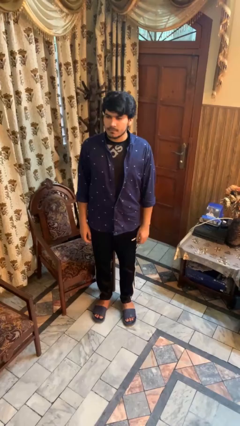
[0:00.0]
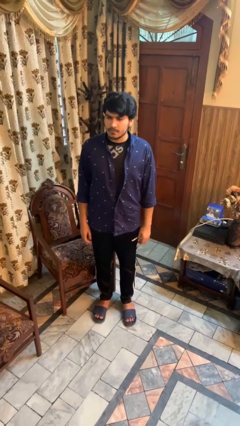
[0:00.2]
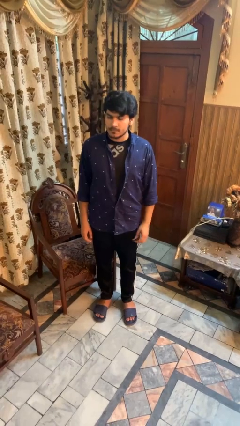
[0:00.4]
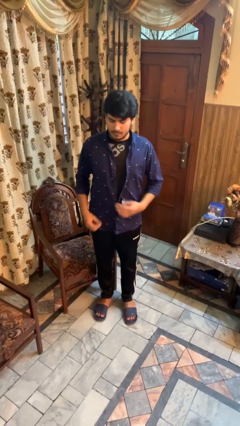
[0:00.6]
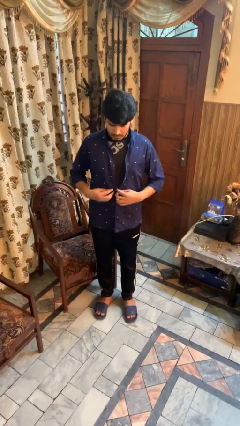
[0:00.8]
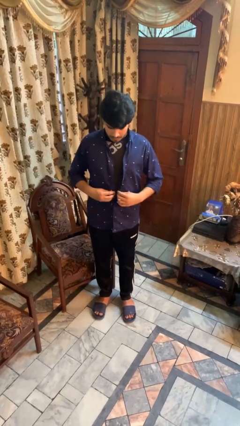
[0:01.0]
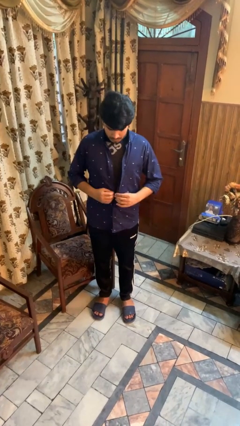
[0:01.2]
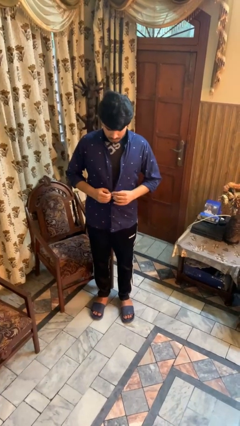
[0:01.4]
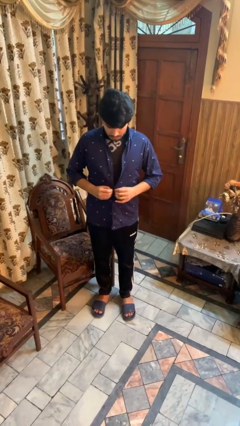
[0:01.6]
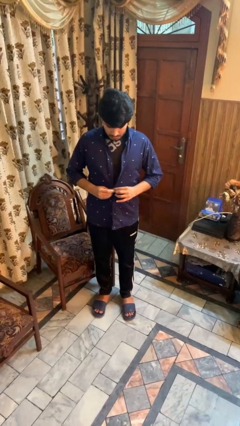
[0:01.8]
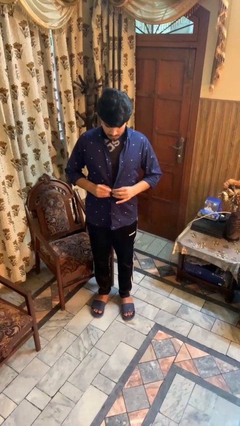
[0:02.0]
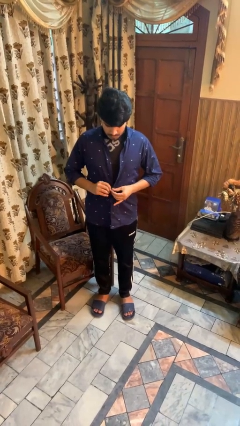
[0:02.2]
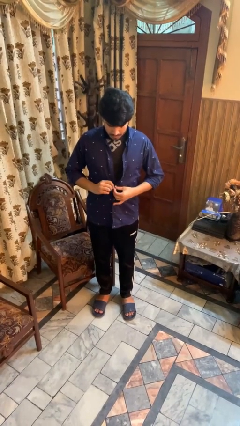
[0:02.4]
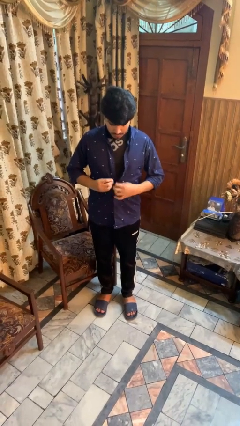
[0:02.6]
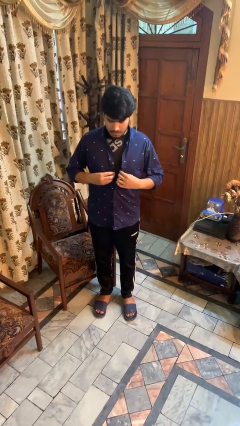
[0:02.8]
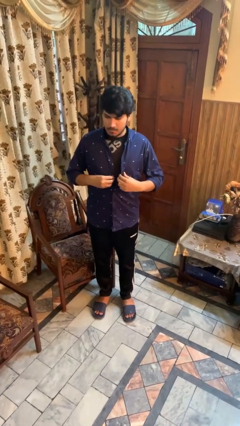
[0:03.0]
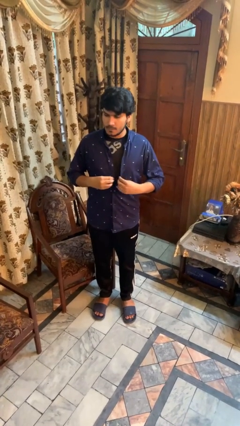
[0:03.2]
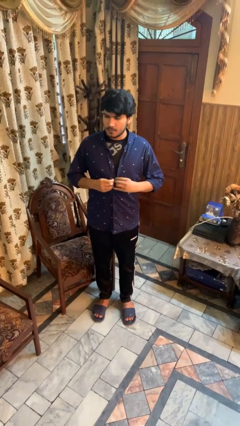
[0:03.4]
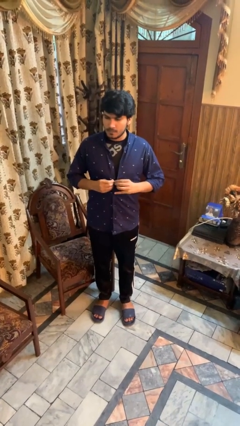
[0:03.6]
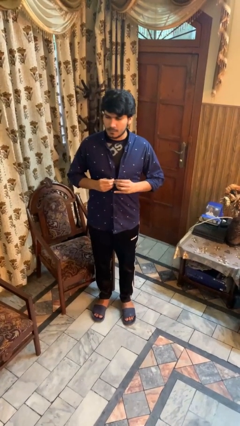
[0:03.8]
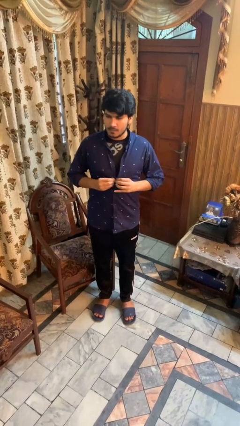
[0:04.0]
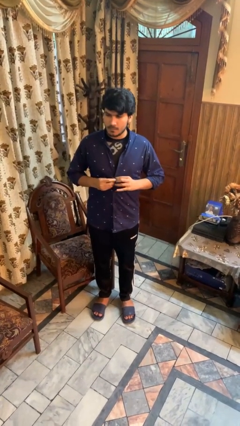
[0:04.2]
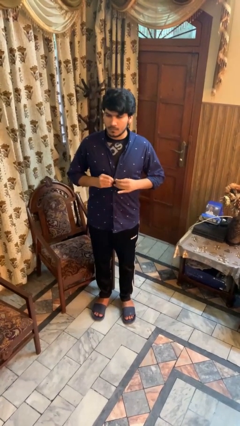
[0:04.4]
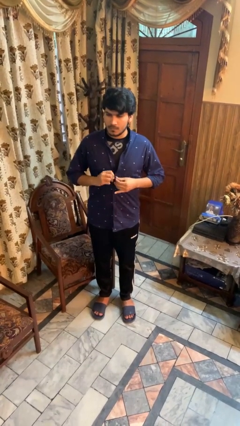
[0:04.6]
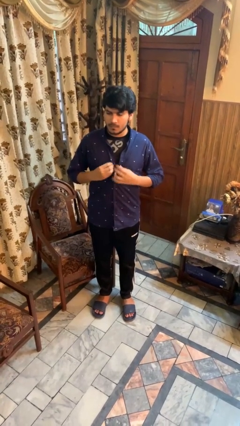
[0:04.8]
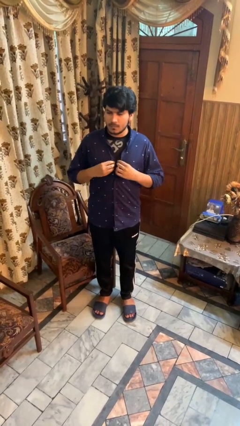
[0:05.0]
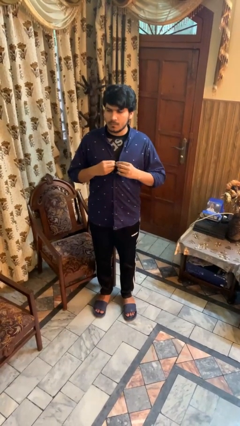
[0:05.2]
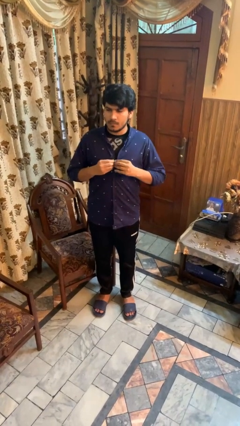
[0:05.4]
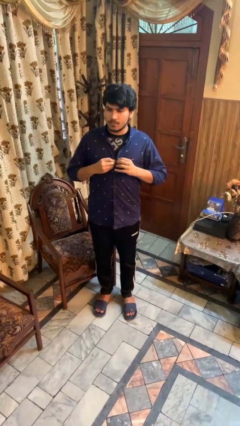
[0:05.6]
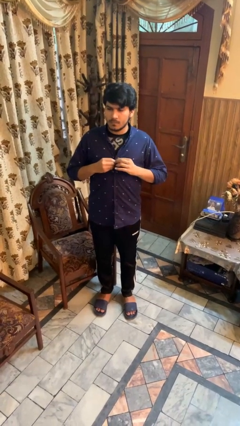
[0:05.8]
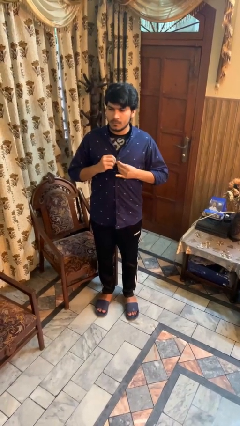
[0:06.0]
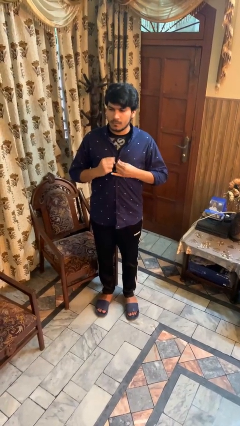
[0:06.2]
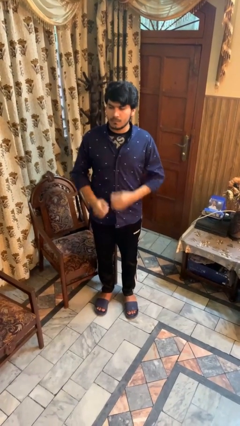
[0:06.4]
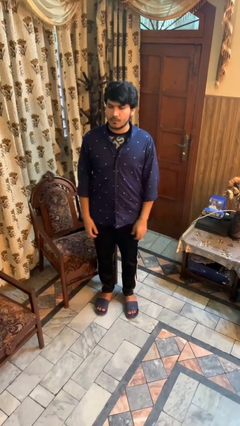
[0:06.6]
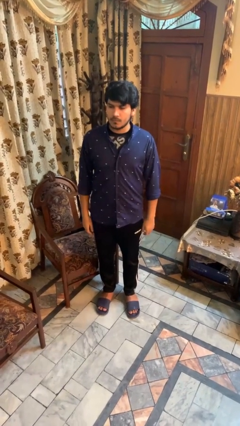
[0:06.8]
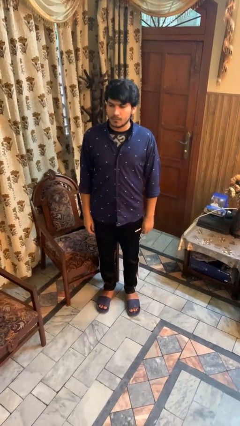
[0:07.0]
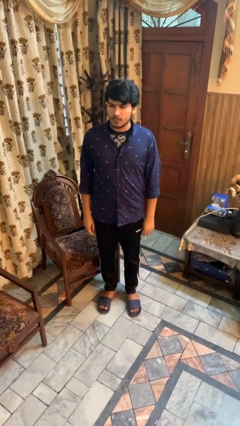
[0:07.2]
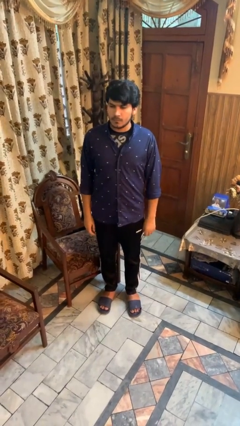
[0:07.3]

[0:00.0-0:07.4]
person buttons shirt

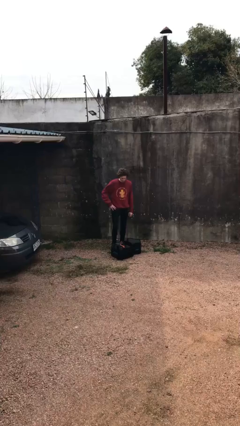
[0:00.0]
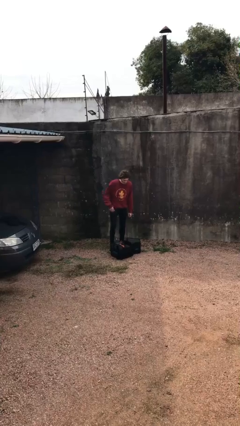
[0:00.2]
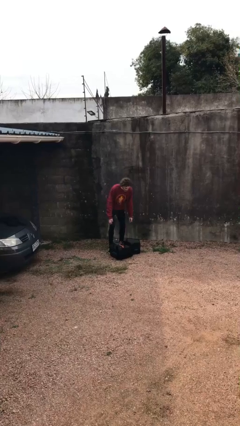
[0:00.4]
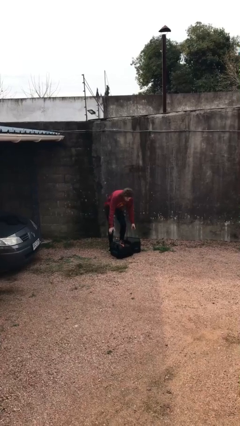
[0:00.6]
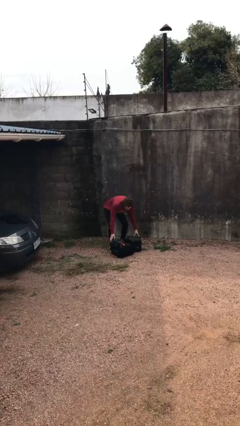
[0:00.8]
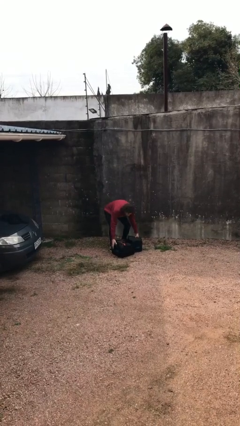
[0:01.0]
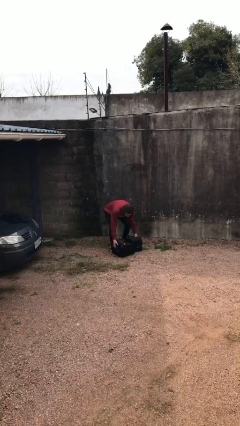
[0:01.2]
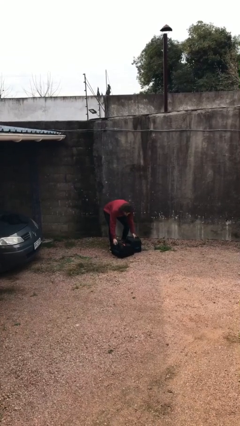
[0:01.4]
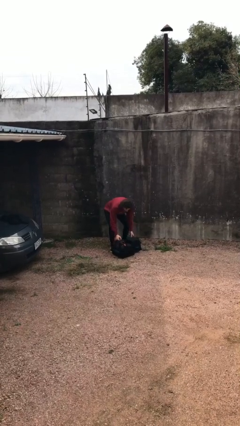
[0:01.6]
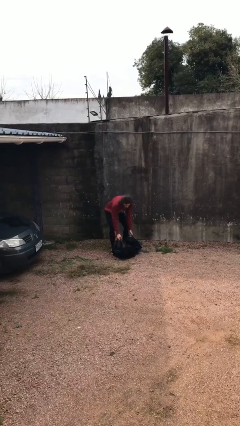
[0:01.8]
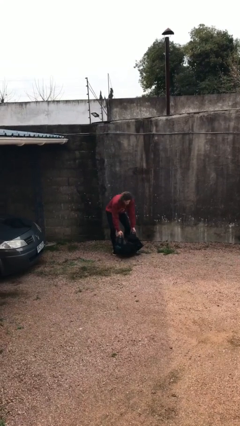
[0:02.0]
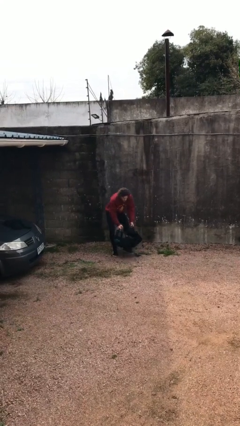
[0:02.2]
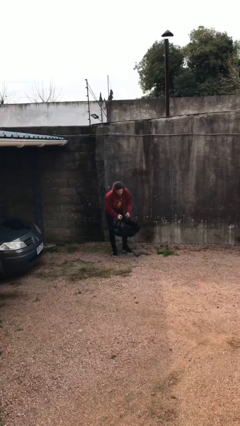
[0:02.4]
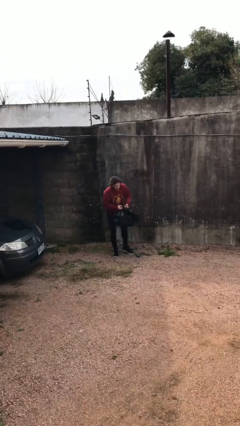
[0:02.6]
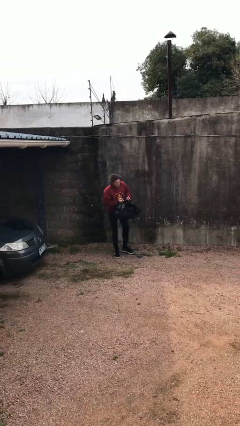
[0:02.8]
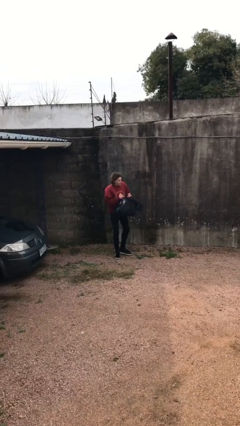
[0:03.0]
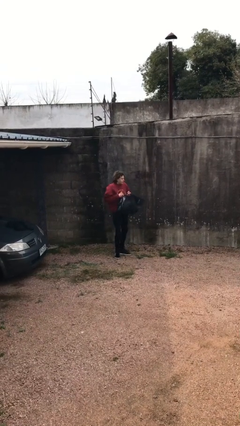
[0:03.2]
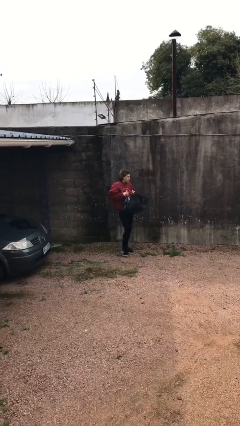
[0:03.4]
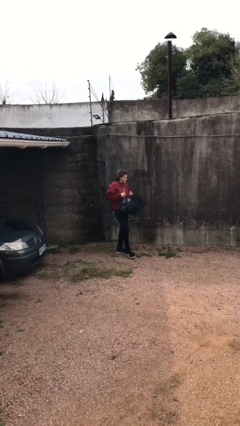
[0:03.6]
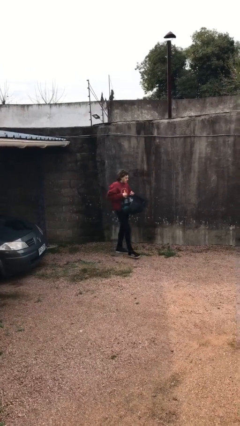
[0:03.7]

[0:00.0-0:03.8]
person picks up object from floor

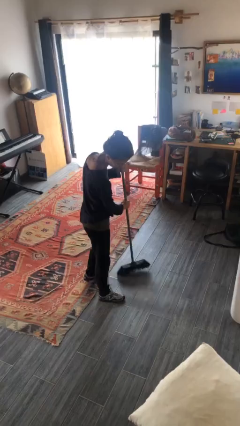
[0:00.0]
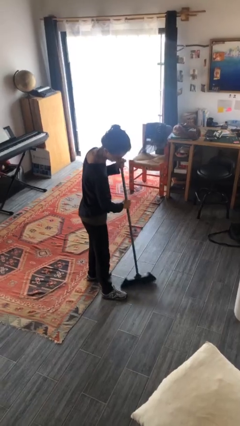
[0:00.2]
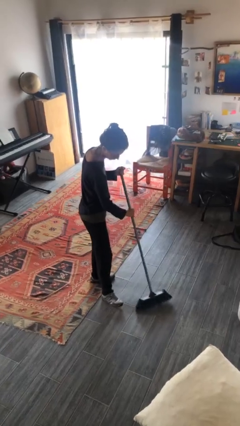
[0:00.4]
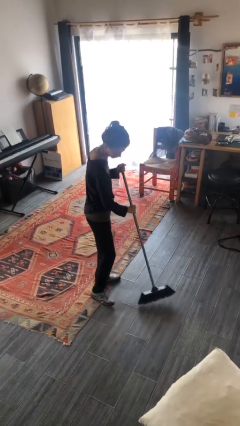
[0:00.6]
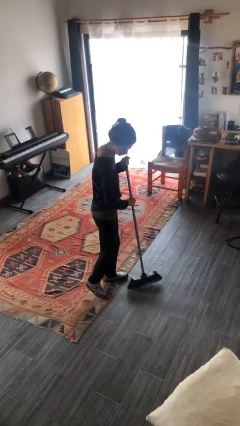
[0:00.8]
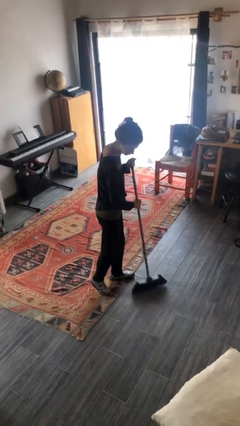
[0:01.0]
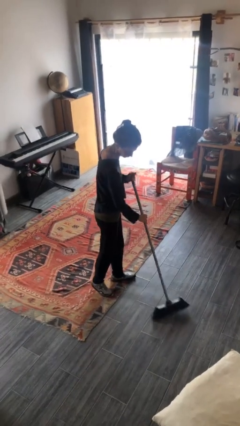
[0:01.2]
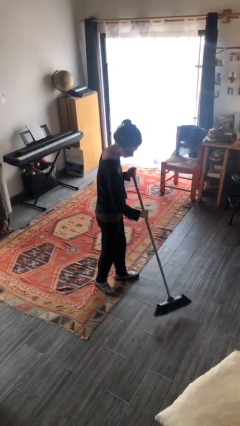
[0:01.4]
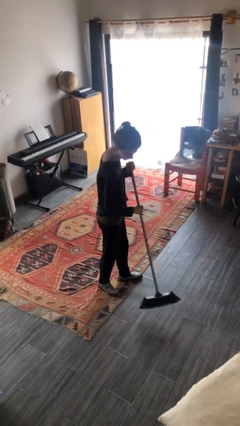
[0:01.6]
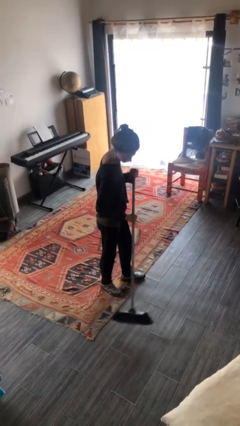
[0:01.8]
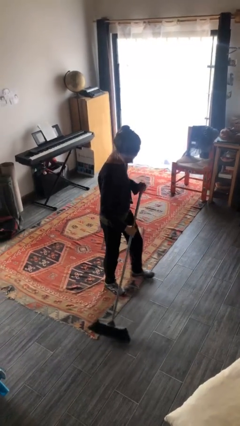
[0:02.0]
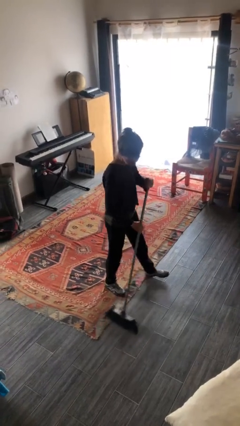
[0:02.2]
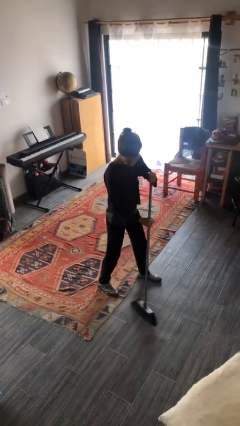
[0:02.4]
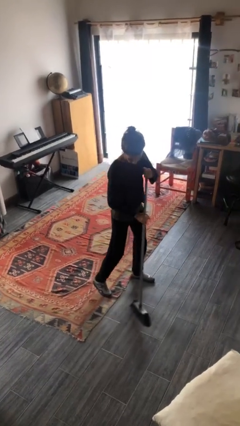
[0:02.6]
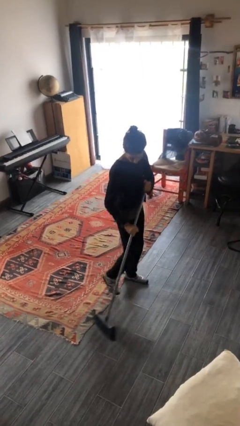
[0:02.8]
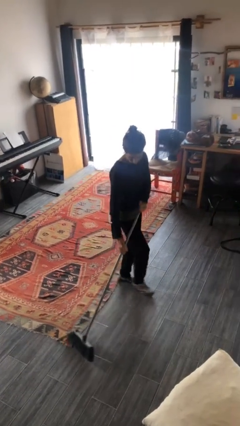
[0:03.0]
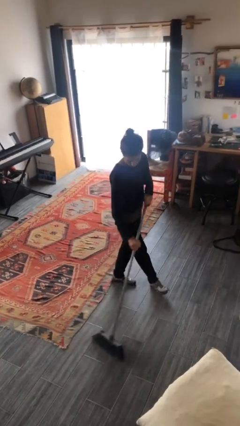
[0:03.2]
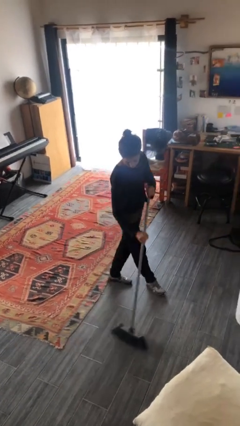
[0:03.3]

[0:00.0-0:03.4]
person sweeps floor

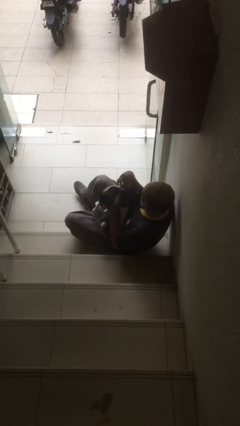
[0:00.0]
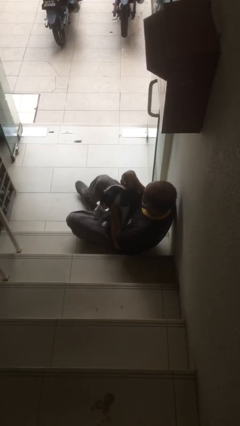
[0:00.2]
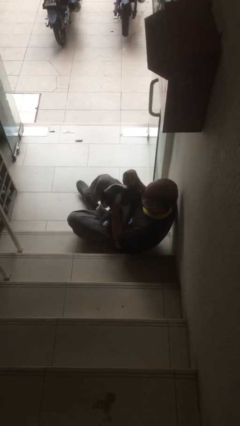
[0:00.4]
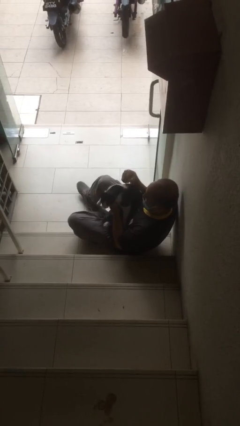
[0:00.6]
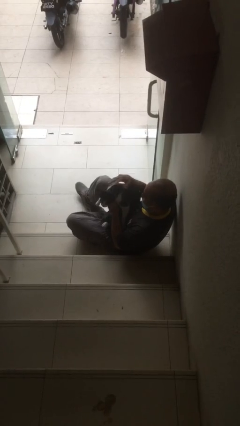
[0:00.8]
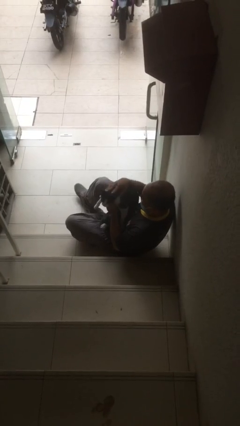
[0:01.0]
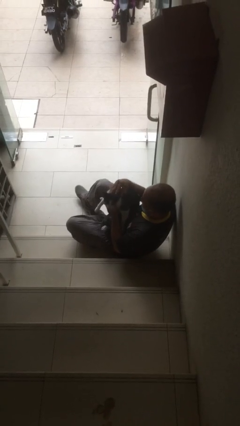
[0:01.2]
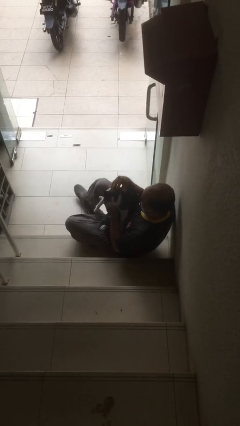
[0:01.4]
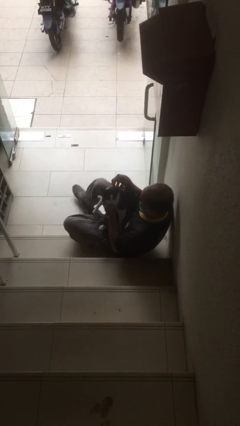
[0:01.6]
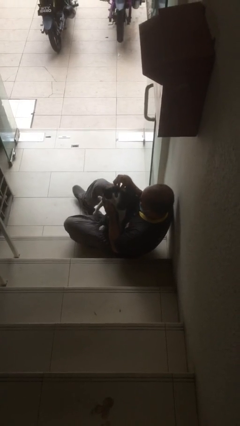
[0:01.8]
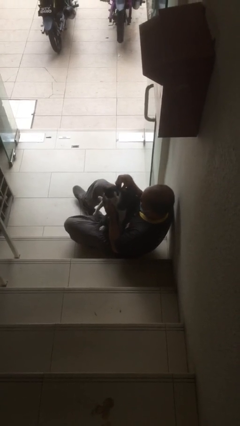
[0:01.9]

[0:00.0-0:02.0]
person pets cat

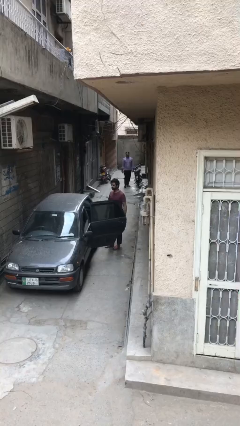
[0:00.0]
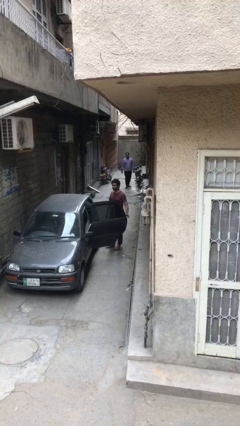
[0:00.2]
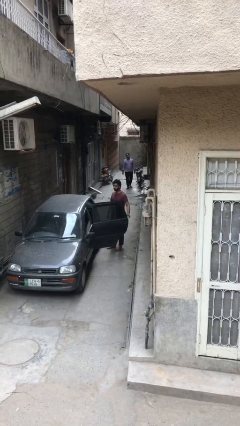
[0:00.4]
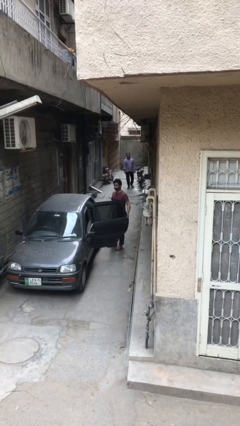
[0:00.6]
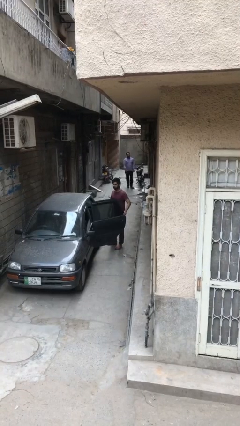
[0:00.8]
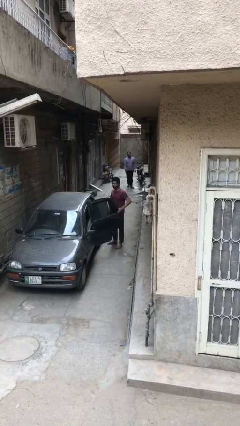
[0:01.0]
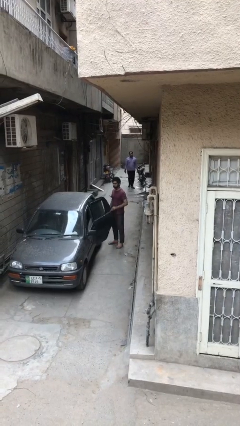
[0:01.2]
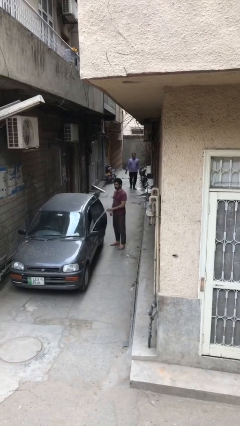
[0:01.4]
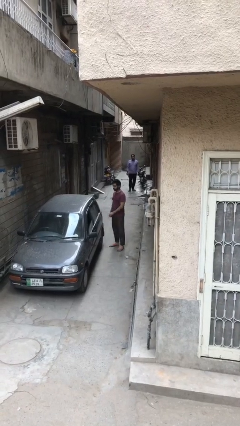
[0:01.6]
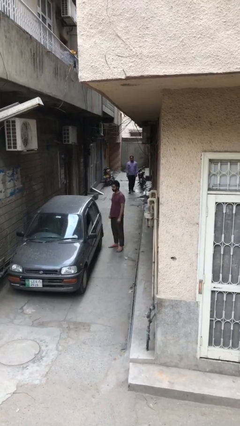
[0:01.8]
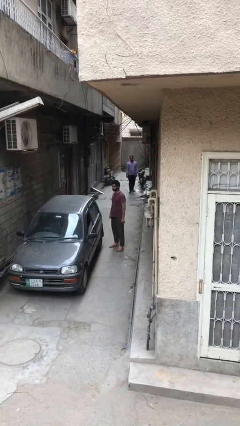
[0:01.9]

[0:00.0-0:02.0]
person closes car door
